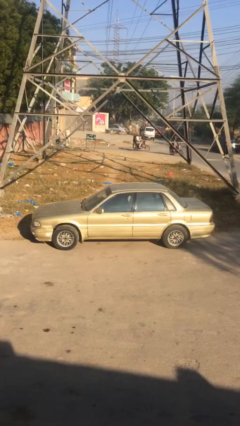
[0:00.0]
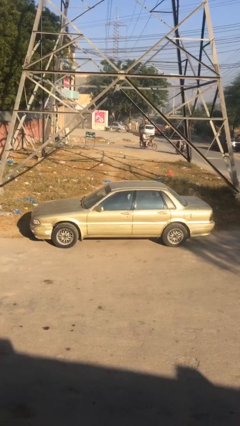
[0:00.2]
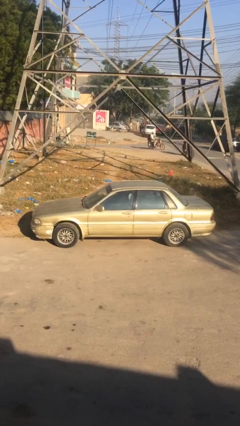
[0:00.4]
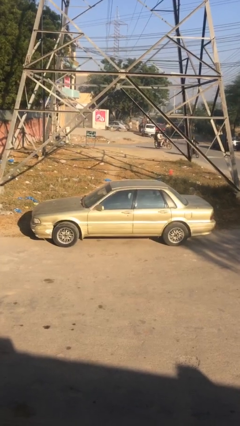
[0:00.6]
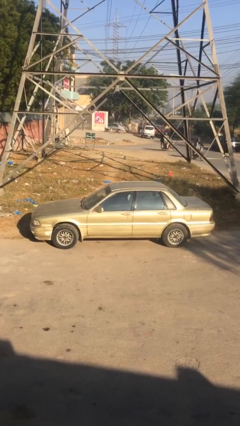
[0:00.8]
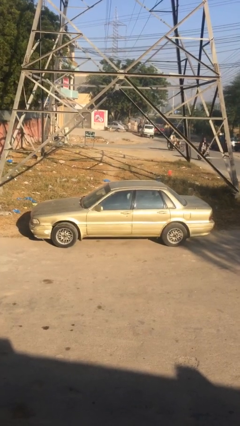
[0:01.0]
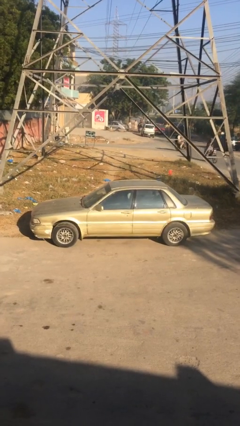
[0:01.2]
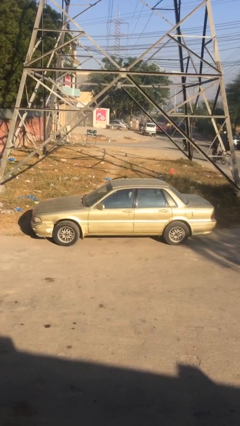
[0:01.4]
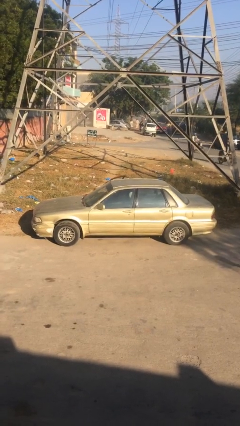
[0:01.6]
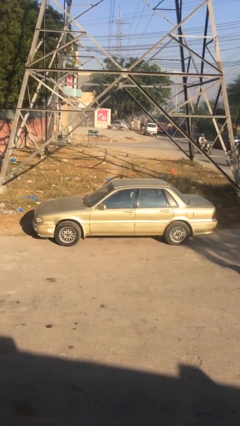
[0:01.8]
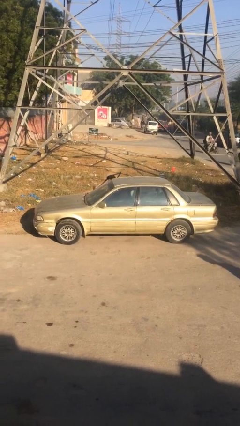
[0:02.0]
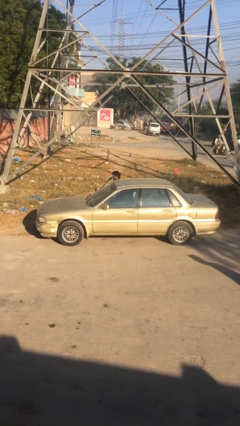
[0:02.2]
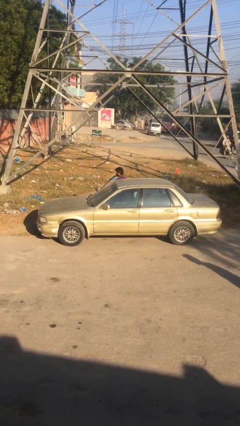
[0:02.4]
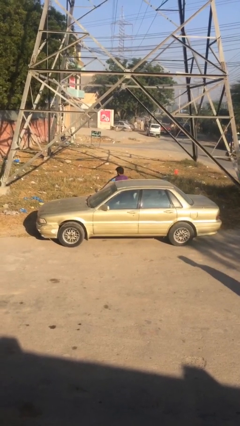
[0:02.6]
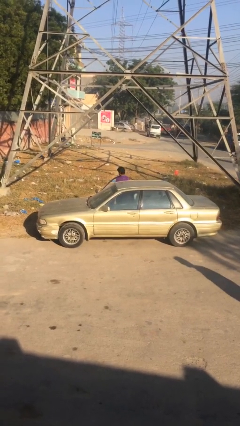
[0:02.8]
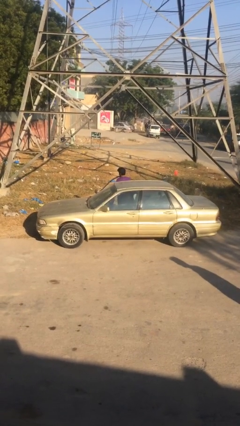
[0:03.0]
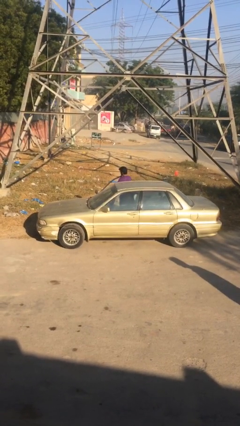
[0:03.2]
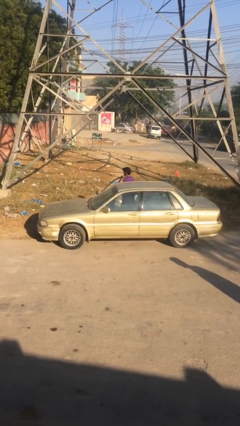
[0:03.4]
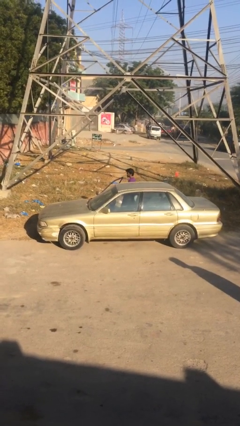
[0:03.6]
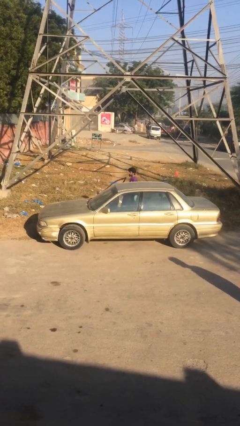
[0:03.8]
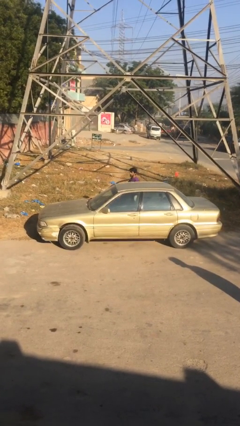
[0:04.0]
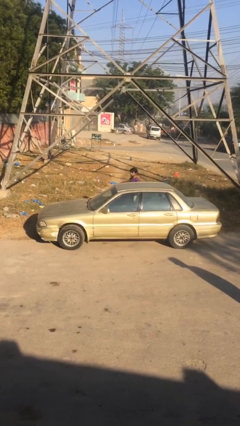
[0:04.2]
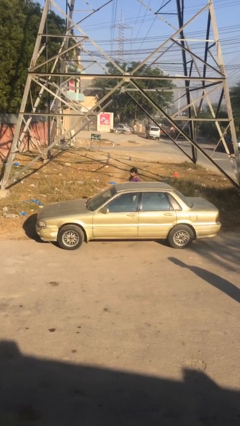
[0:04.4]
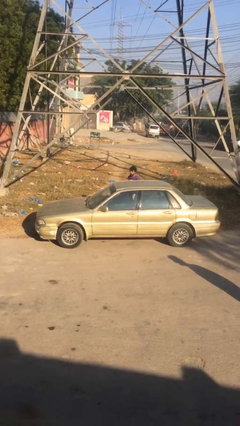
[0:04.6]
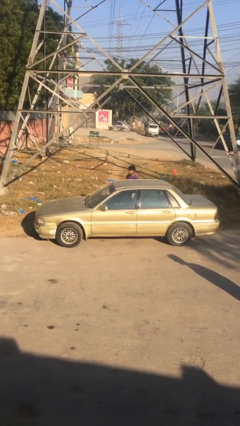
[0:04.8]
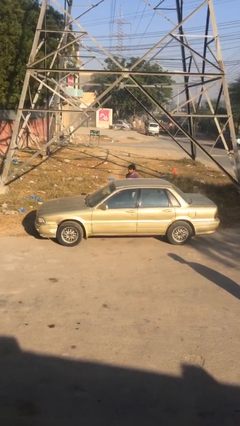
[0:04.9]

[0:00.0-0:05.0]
car drops off person

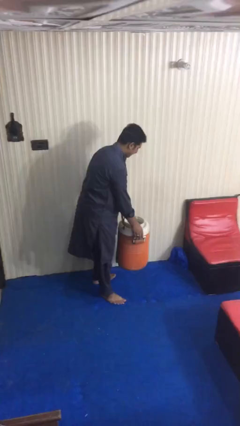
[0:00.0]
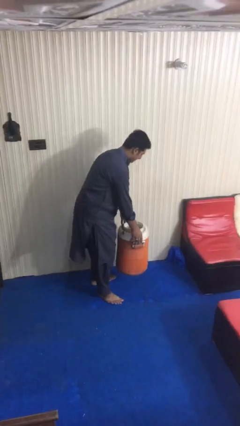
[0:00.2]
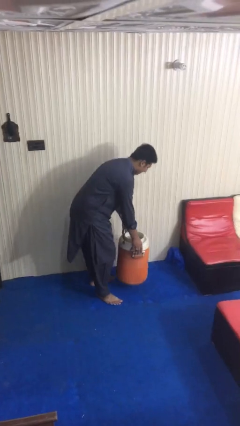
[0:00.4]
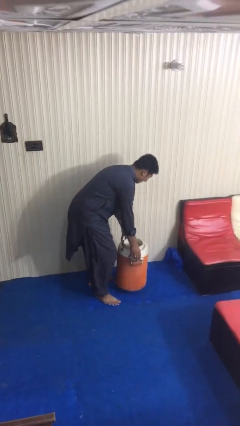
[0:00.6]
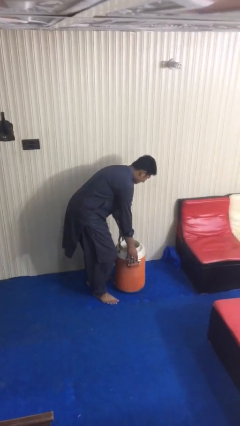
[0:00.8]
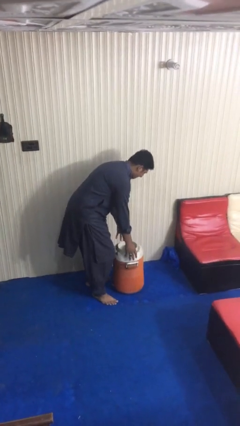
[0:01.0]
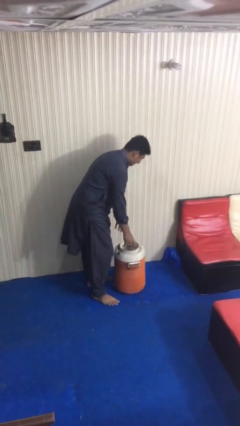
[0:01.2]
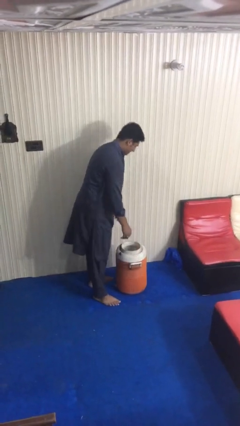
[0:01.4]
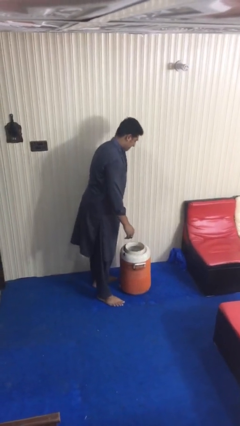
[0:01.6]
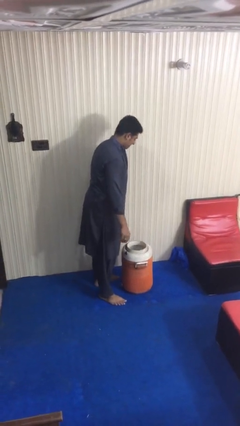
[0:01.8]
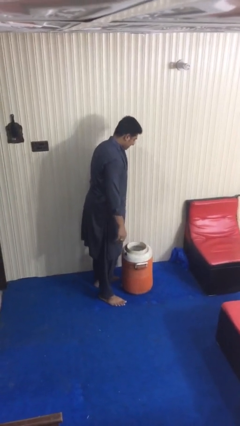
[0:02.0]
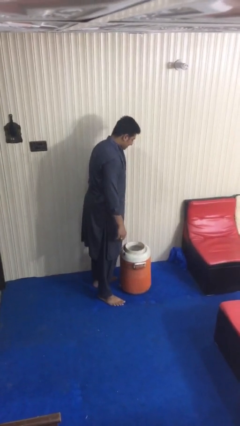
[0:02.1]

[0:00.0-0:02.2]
person puts down object on floor

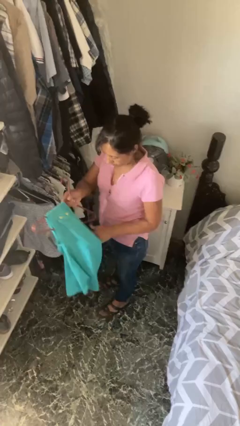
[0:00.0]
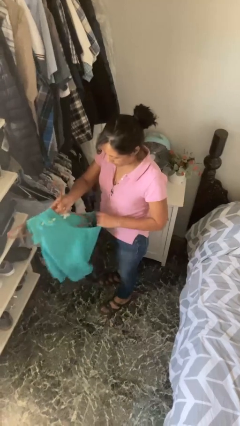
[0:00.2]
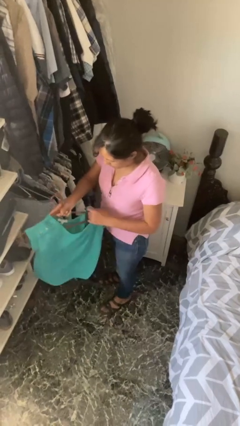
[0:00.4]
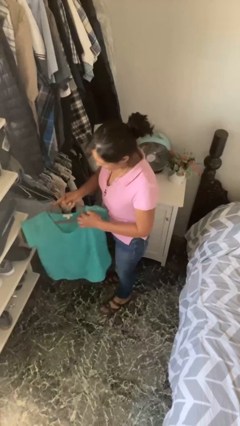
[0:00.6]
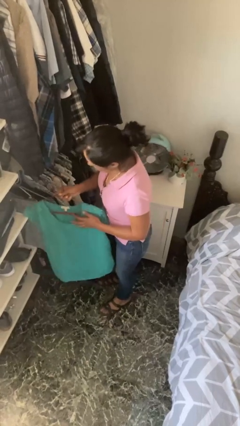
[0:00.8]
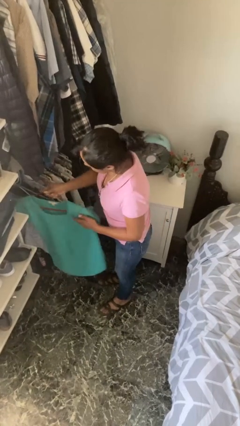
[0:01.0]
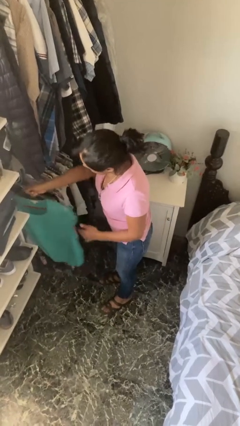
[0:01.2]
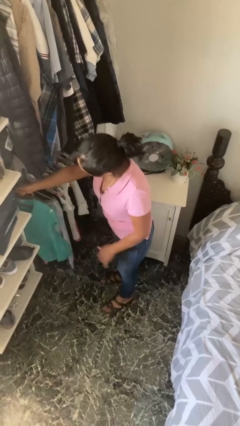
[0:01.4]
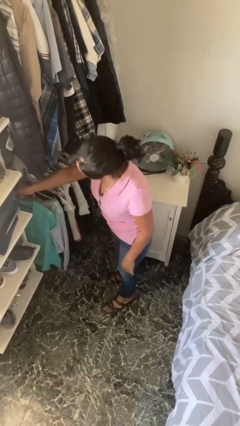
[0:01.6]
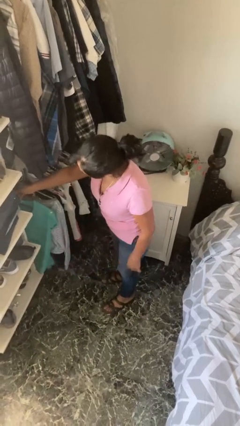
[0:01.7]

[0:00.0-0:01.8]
person puts clothes into closet

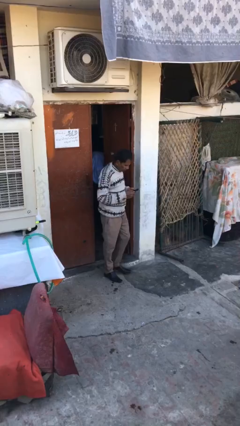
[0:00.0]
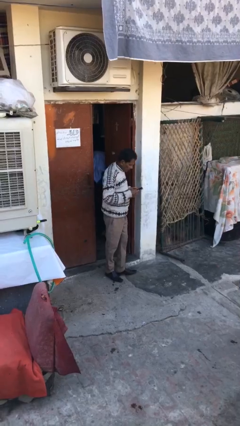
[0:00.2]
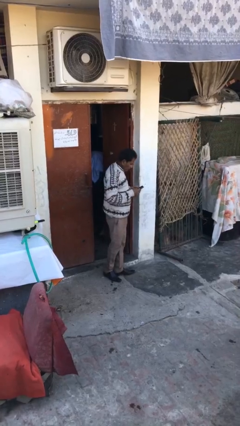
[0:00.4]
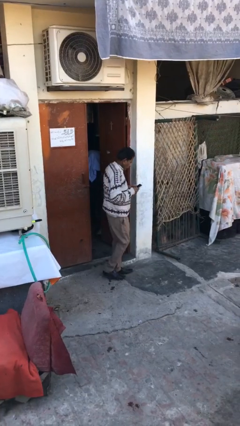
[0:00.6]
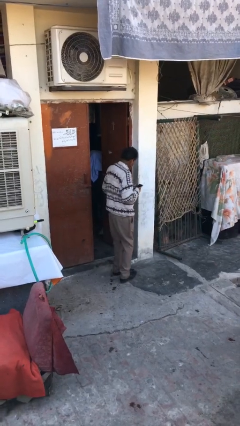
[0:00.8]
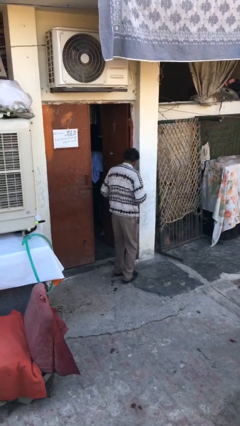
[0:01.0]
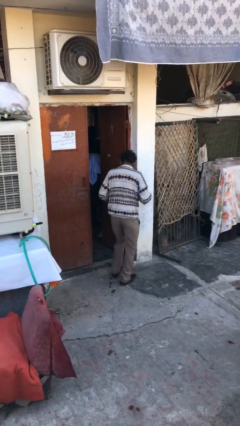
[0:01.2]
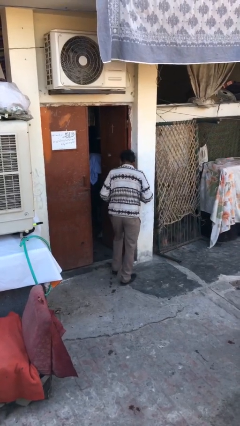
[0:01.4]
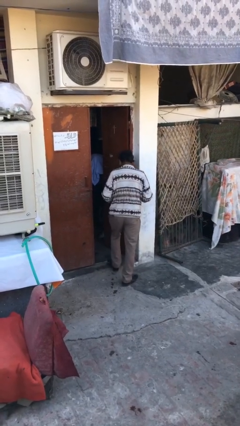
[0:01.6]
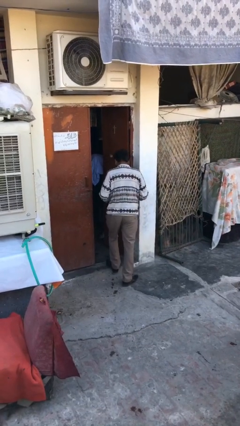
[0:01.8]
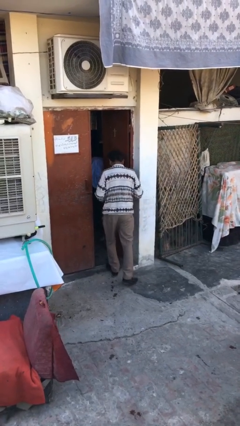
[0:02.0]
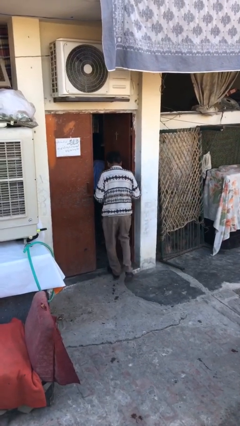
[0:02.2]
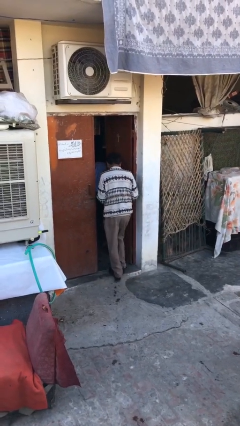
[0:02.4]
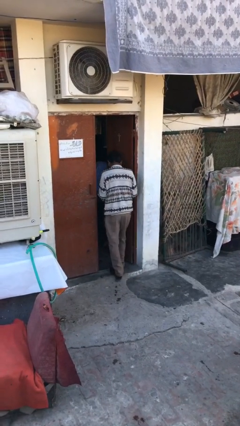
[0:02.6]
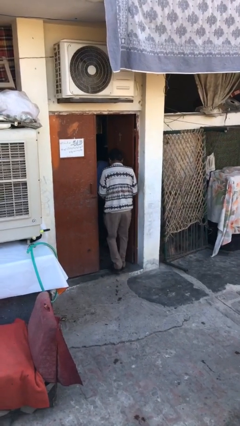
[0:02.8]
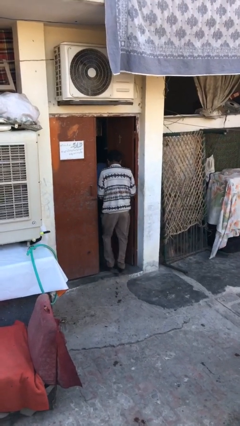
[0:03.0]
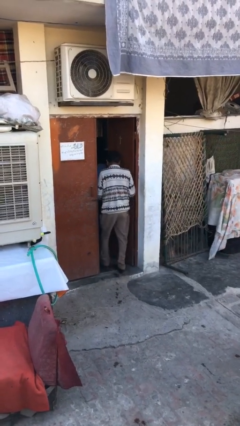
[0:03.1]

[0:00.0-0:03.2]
person exits scene through structure

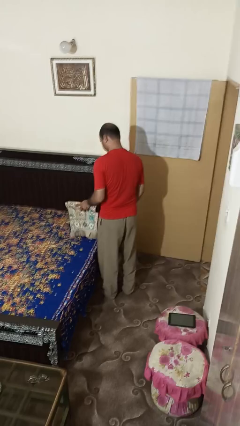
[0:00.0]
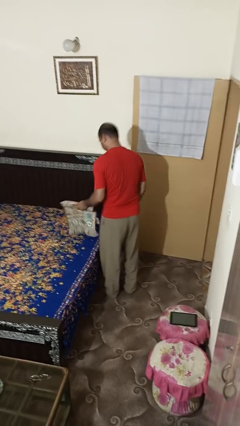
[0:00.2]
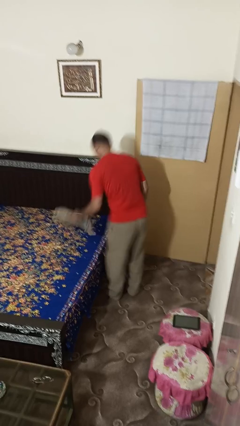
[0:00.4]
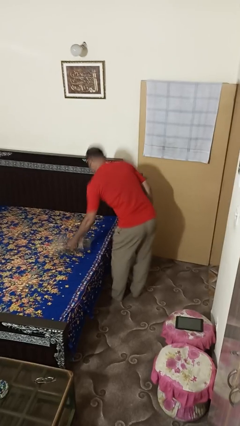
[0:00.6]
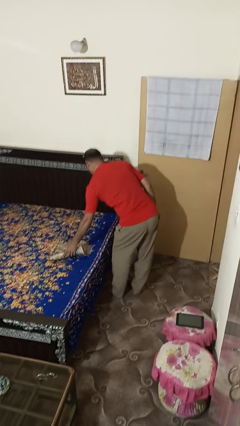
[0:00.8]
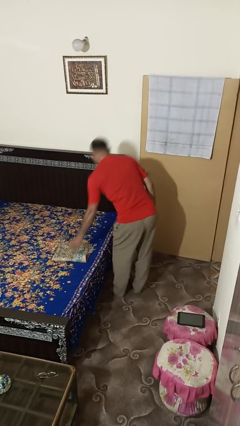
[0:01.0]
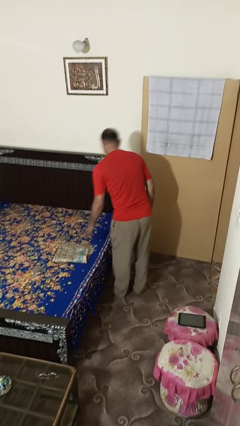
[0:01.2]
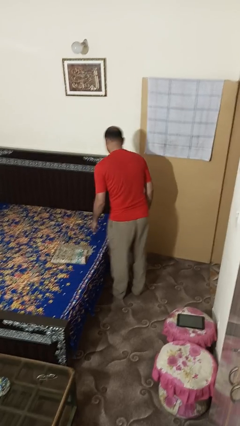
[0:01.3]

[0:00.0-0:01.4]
person puts down object on bed

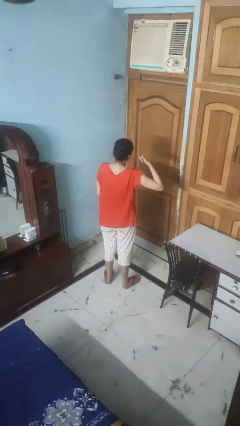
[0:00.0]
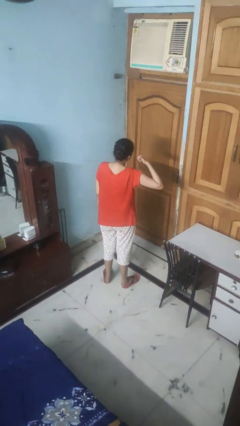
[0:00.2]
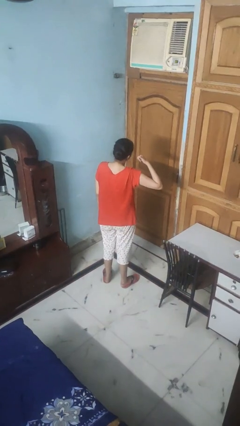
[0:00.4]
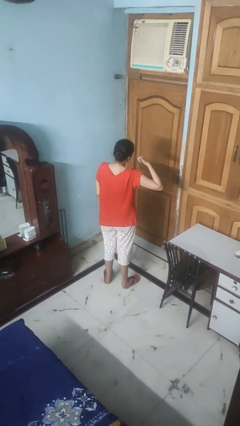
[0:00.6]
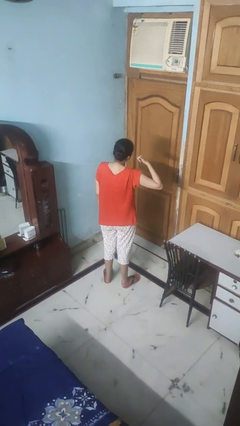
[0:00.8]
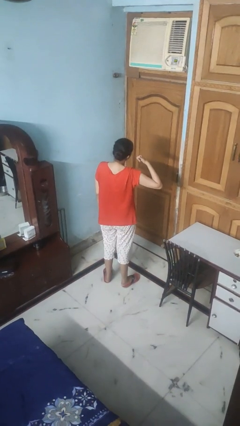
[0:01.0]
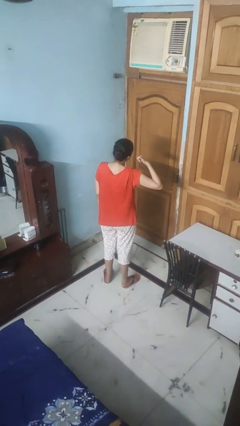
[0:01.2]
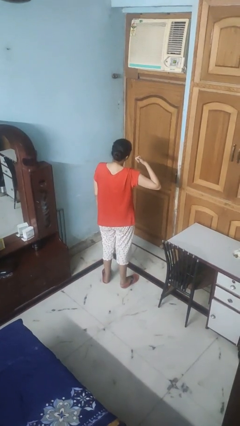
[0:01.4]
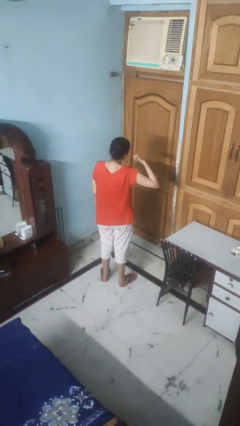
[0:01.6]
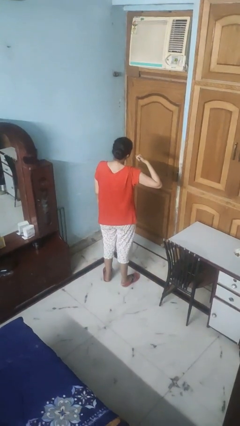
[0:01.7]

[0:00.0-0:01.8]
person gestures call me

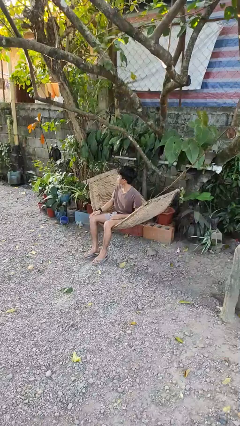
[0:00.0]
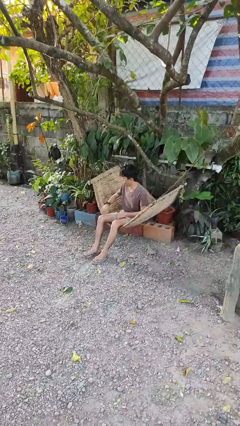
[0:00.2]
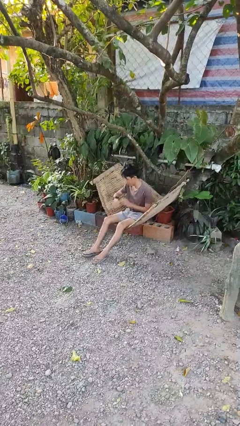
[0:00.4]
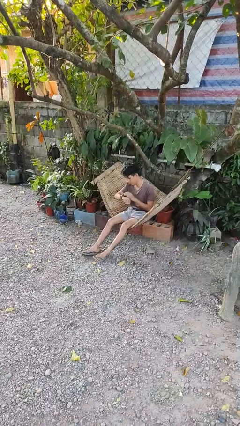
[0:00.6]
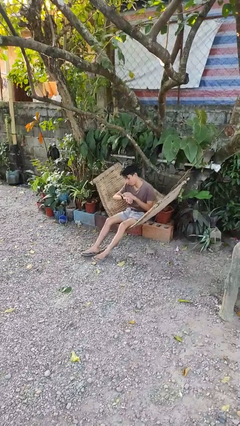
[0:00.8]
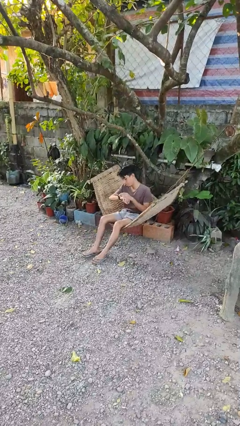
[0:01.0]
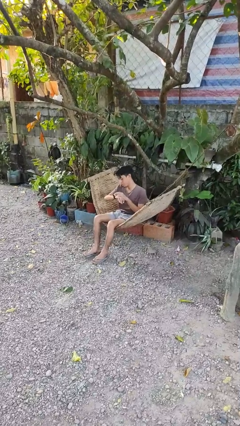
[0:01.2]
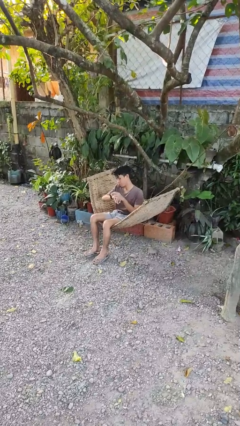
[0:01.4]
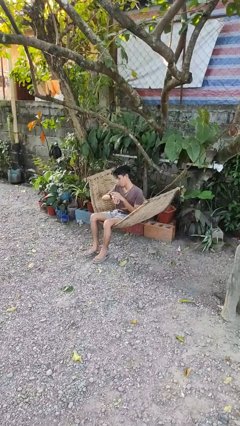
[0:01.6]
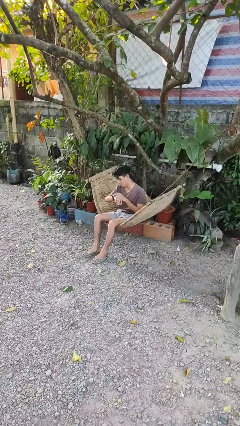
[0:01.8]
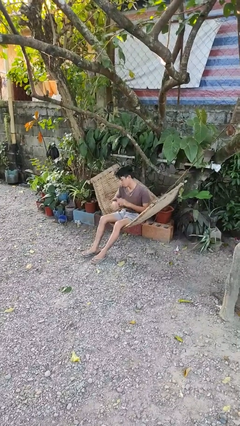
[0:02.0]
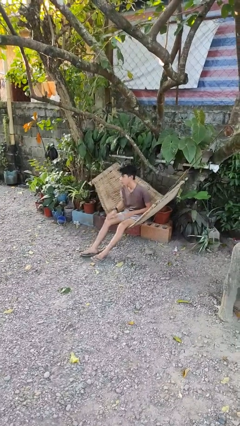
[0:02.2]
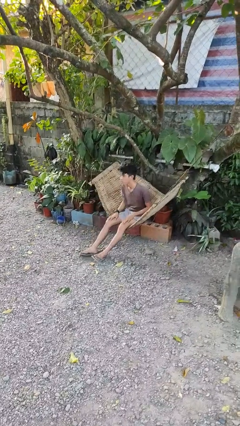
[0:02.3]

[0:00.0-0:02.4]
person looks at wristwatch
